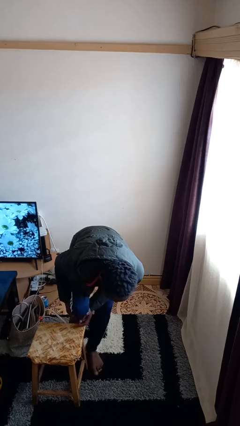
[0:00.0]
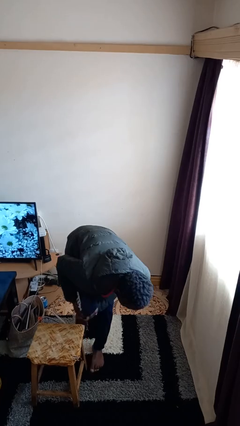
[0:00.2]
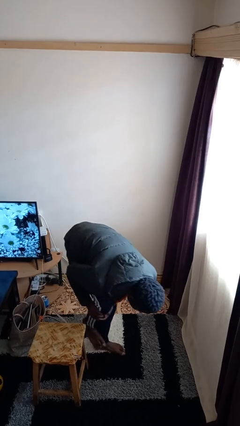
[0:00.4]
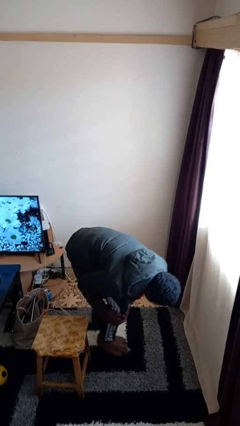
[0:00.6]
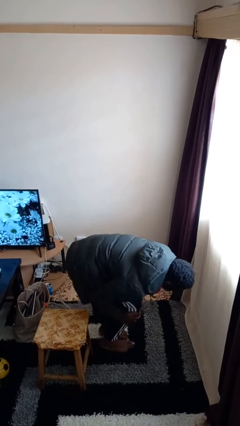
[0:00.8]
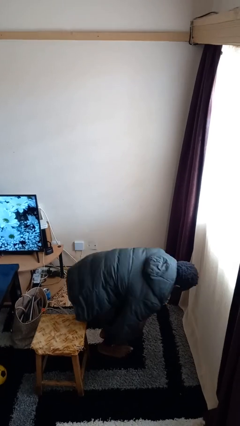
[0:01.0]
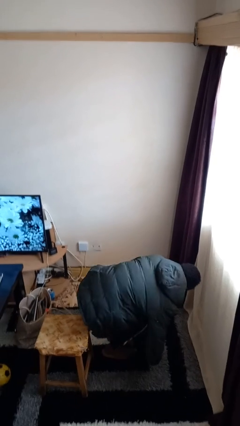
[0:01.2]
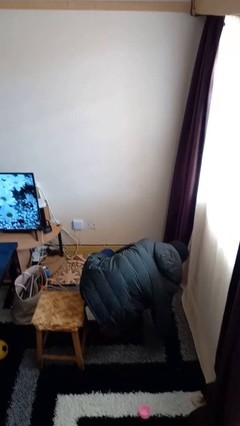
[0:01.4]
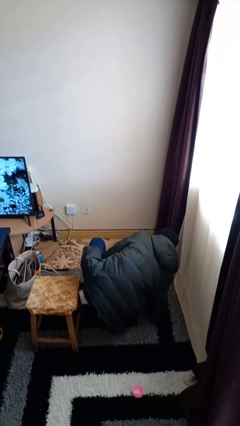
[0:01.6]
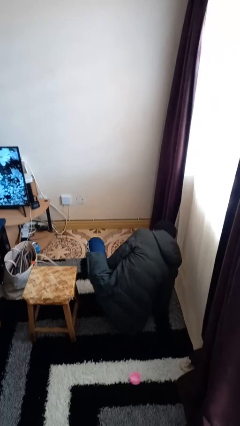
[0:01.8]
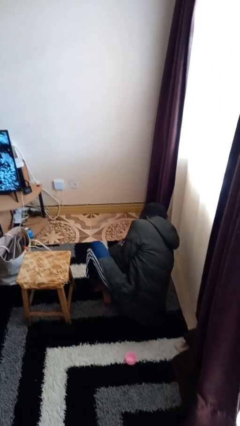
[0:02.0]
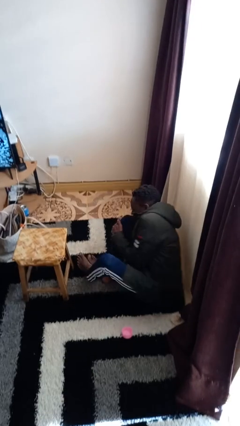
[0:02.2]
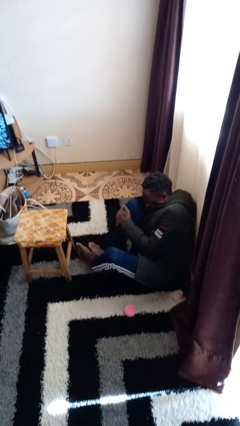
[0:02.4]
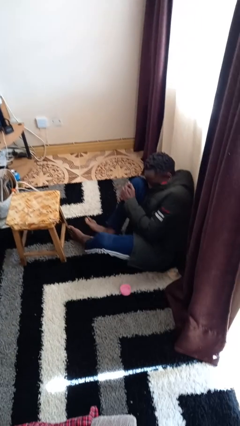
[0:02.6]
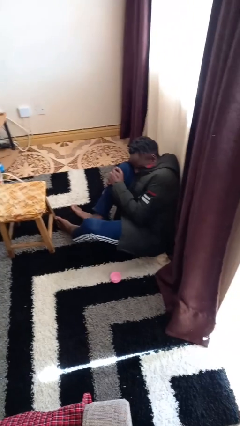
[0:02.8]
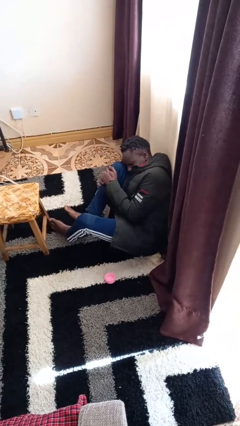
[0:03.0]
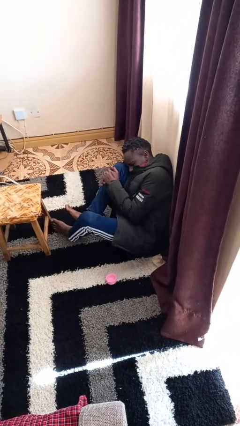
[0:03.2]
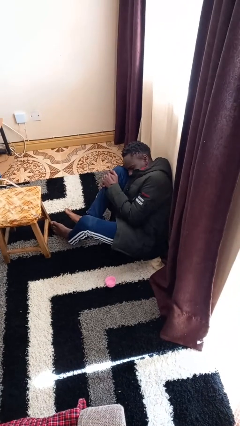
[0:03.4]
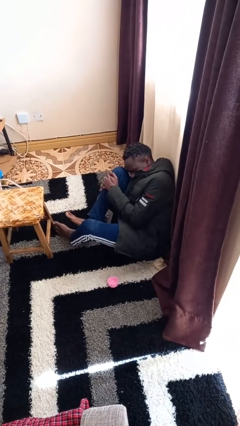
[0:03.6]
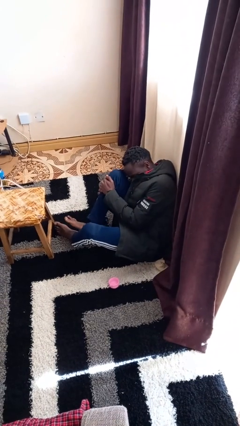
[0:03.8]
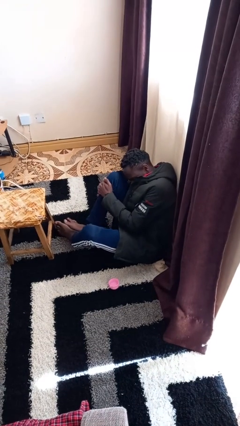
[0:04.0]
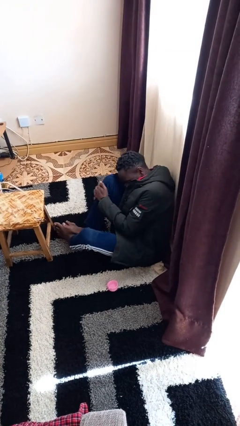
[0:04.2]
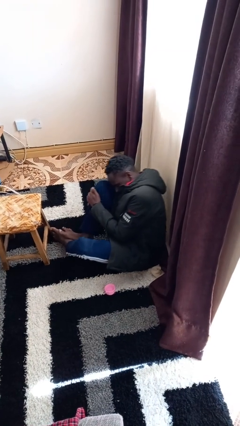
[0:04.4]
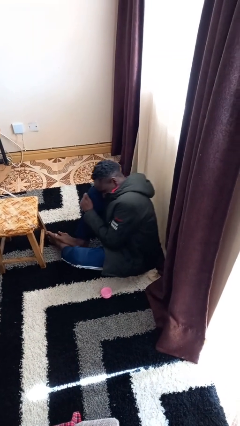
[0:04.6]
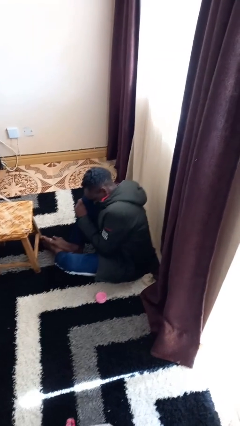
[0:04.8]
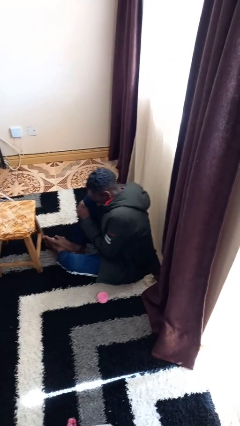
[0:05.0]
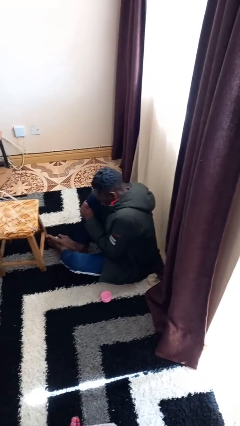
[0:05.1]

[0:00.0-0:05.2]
person lies down on floor

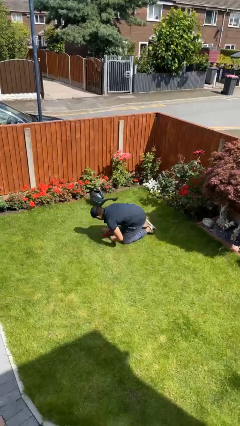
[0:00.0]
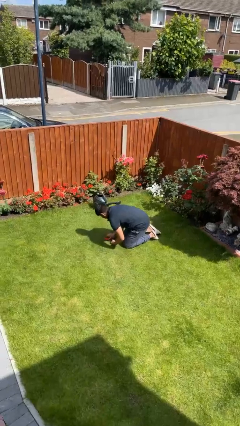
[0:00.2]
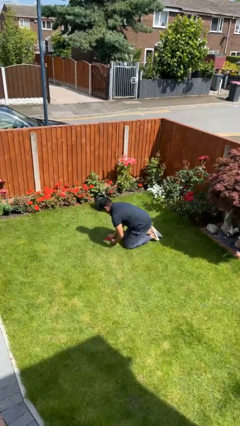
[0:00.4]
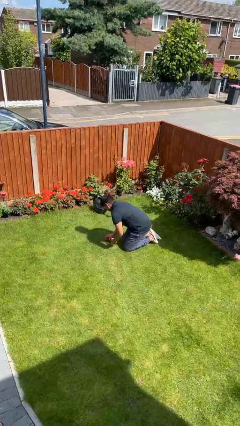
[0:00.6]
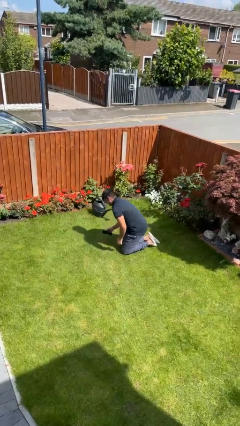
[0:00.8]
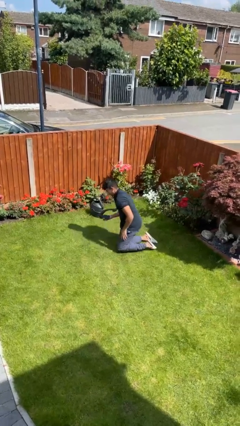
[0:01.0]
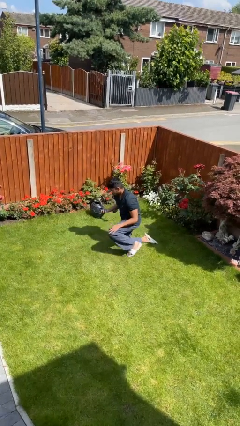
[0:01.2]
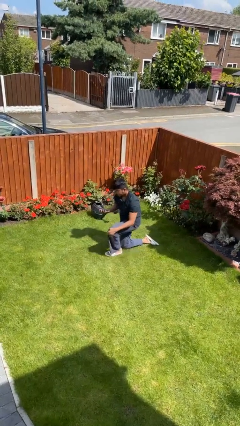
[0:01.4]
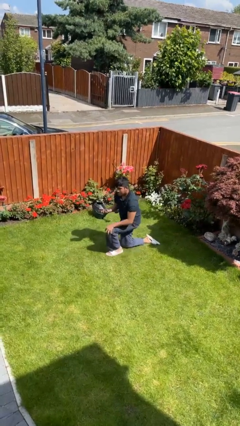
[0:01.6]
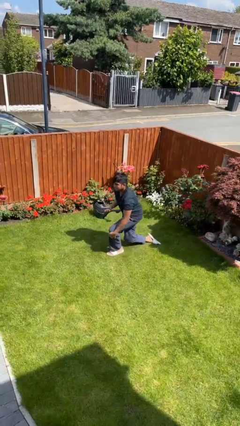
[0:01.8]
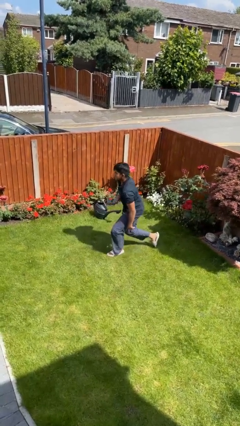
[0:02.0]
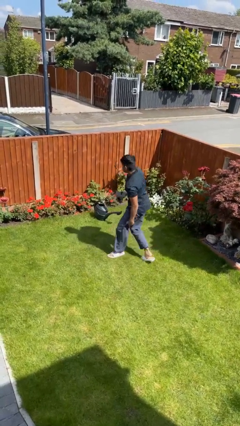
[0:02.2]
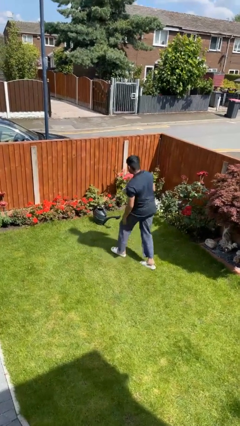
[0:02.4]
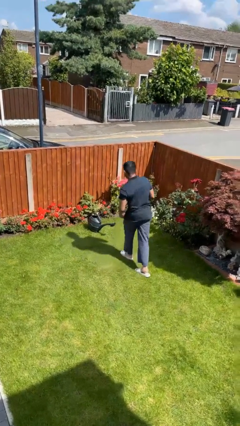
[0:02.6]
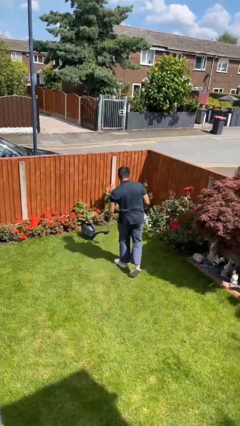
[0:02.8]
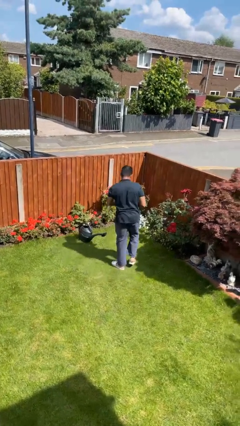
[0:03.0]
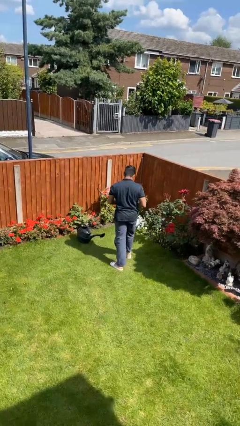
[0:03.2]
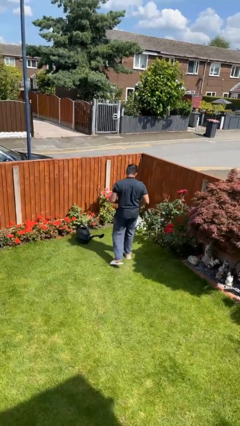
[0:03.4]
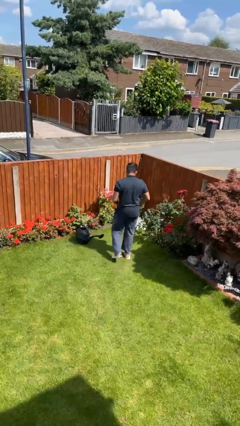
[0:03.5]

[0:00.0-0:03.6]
person stands up from floor

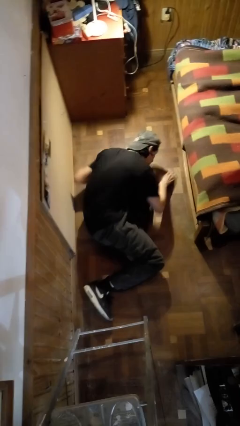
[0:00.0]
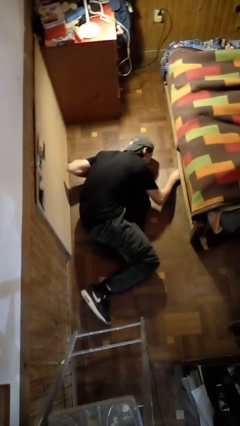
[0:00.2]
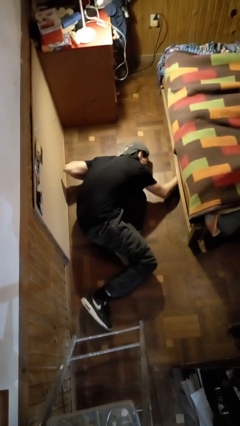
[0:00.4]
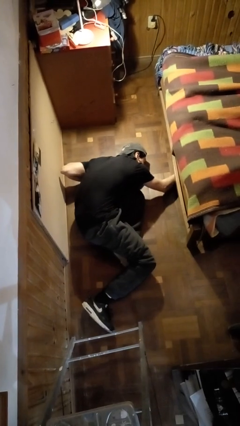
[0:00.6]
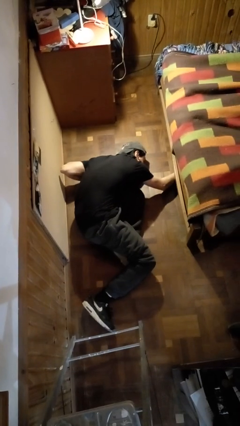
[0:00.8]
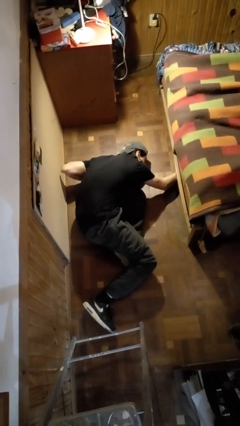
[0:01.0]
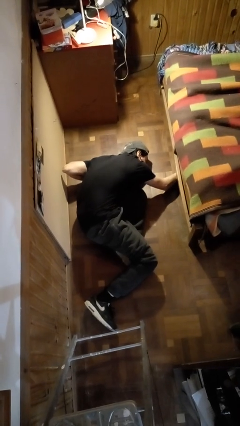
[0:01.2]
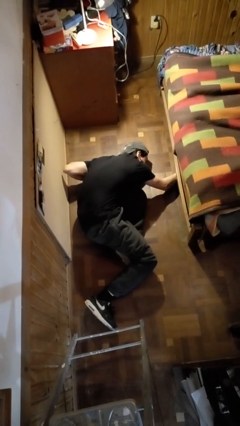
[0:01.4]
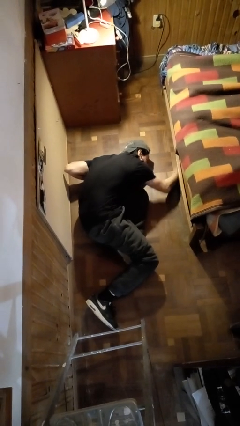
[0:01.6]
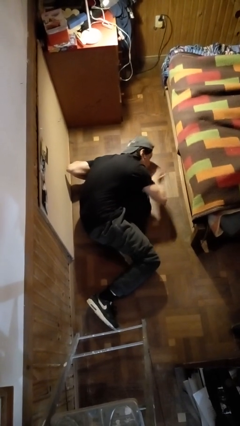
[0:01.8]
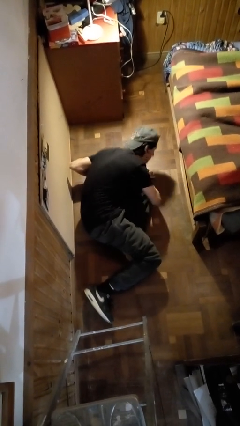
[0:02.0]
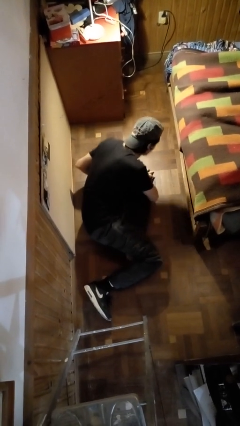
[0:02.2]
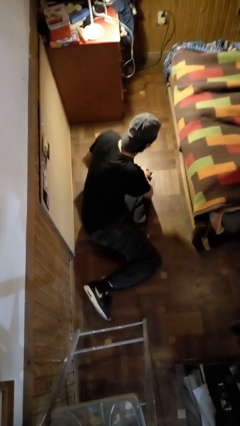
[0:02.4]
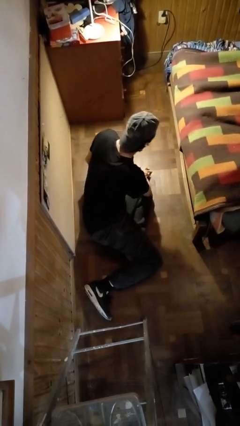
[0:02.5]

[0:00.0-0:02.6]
person searches under bed

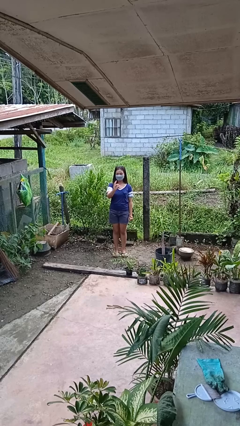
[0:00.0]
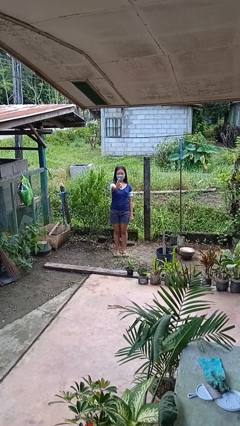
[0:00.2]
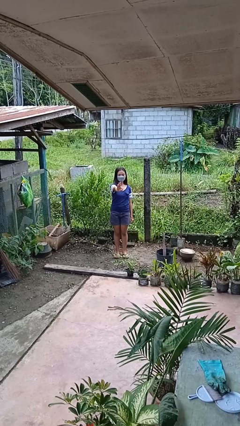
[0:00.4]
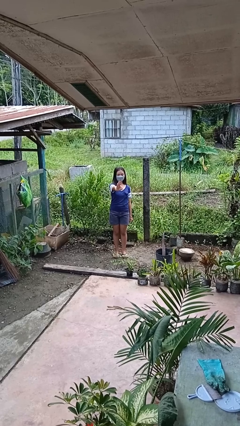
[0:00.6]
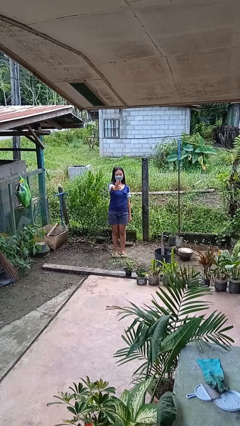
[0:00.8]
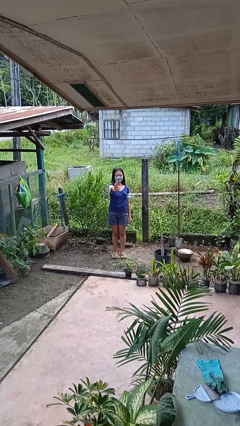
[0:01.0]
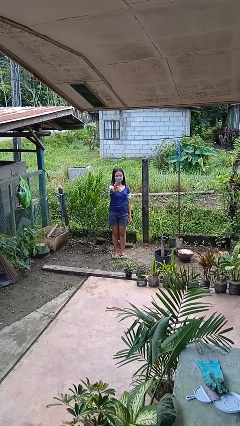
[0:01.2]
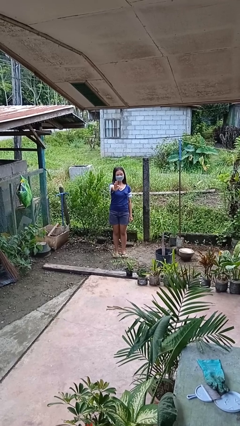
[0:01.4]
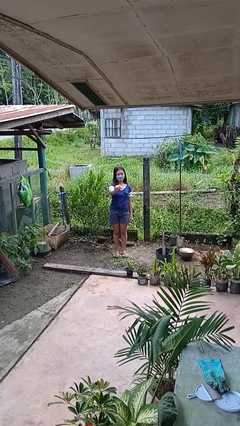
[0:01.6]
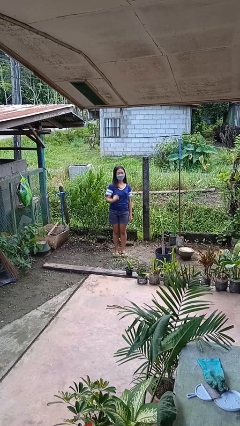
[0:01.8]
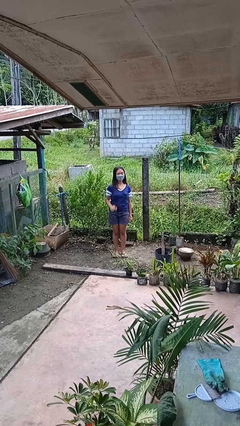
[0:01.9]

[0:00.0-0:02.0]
person gestures number three

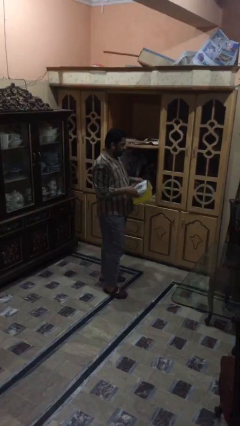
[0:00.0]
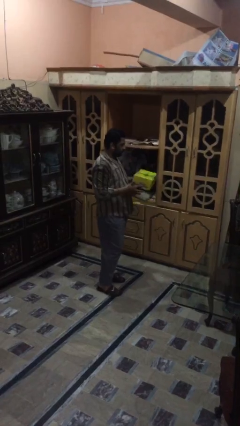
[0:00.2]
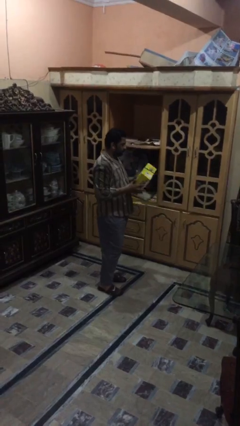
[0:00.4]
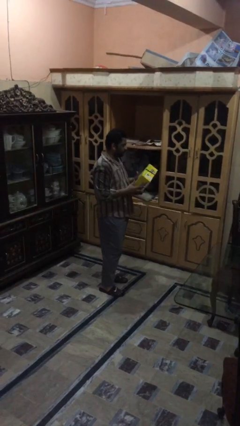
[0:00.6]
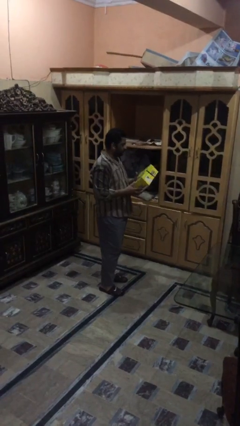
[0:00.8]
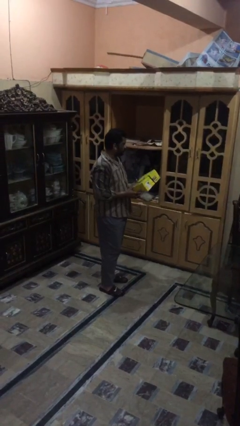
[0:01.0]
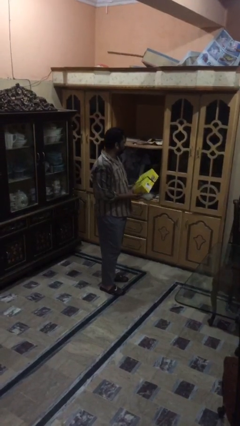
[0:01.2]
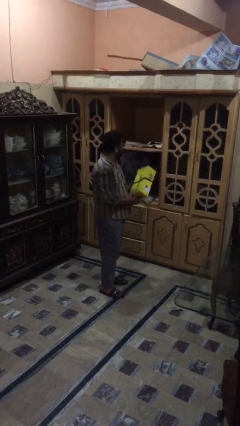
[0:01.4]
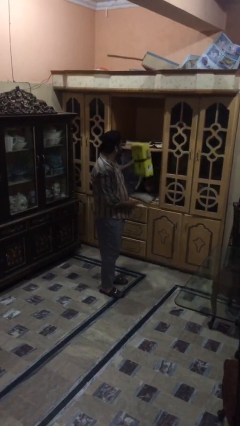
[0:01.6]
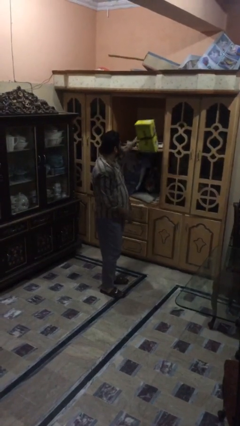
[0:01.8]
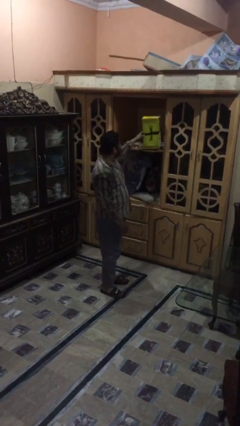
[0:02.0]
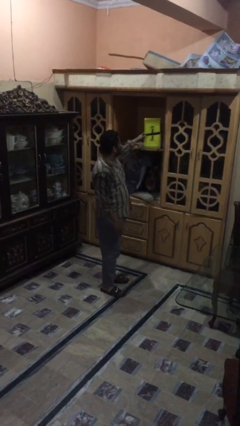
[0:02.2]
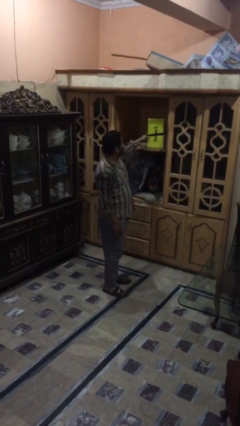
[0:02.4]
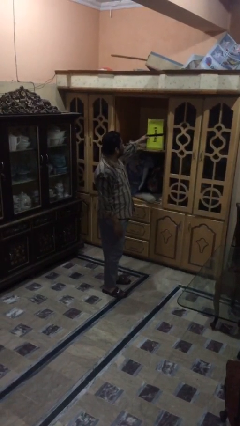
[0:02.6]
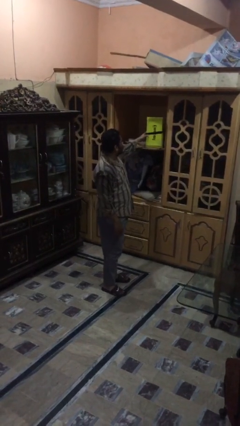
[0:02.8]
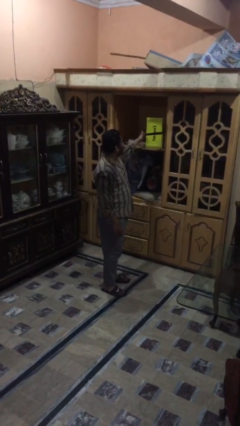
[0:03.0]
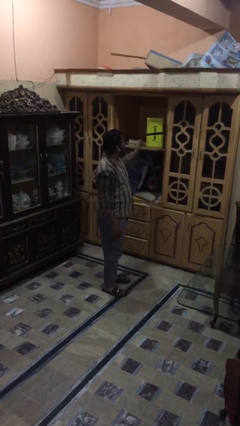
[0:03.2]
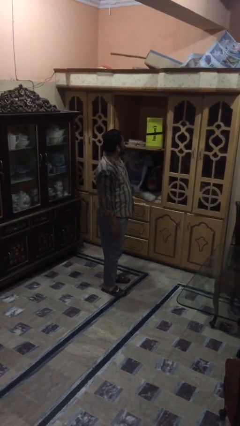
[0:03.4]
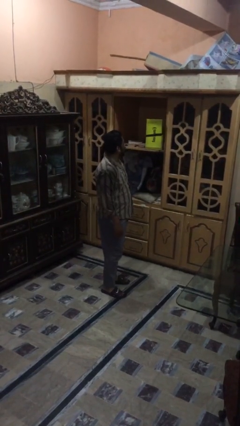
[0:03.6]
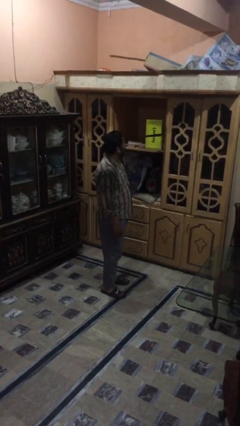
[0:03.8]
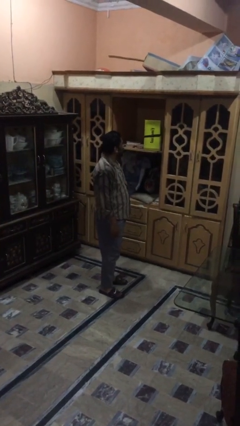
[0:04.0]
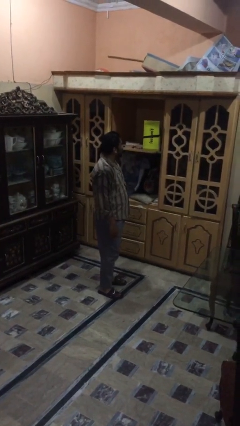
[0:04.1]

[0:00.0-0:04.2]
person puts down object on shelf

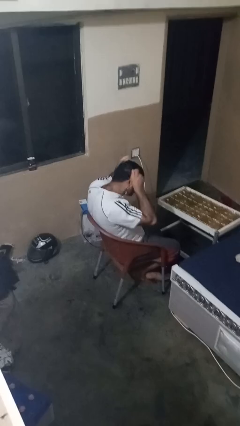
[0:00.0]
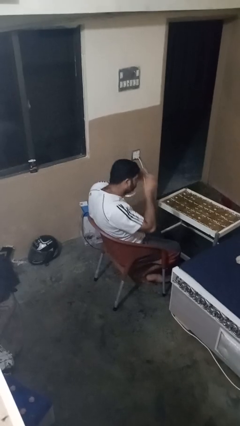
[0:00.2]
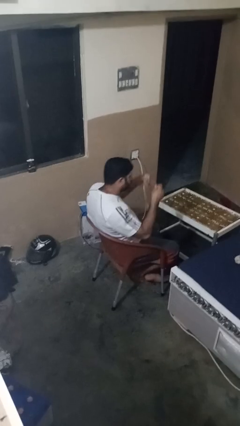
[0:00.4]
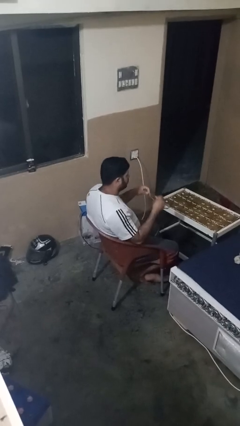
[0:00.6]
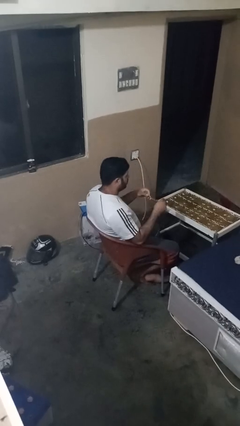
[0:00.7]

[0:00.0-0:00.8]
person takes off necklace
